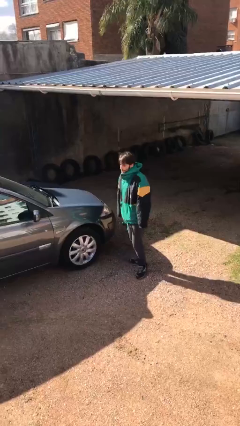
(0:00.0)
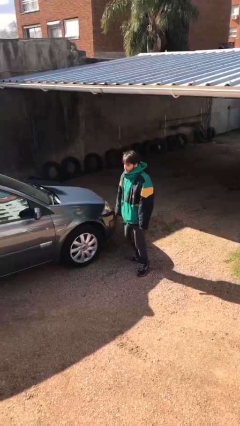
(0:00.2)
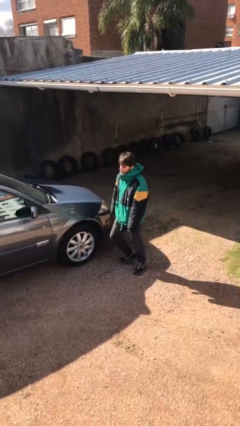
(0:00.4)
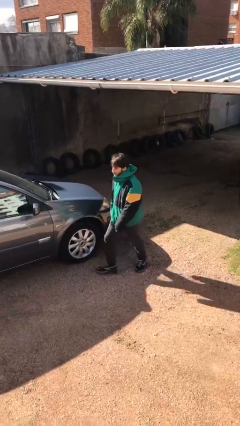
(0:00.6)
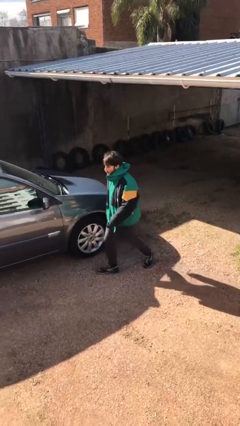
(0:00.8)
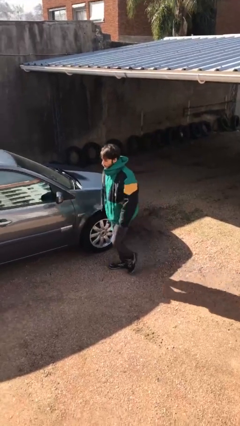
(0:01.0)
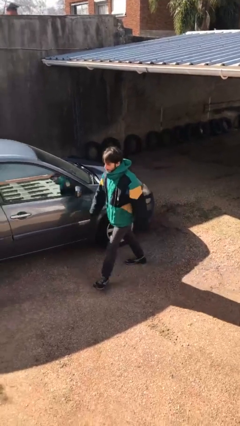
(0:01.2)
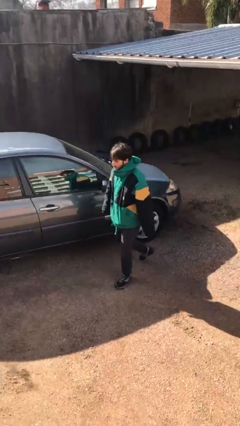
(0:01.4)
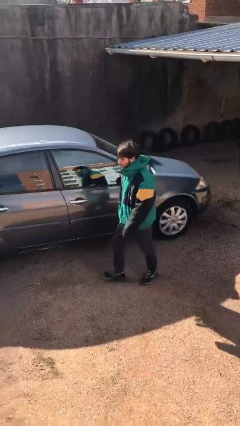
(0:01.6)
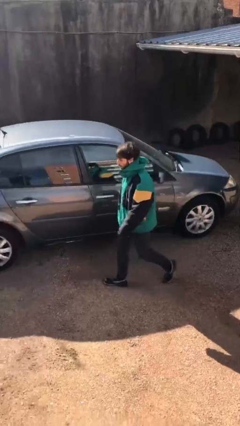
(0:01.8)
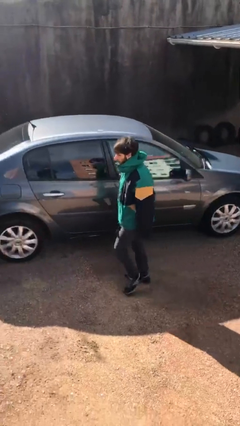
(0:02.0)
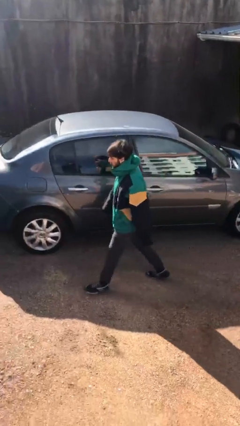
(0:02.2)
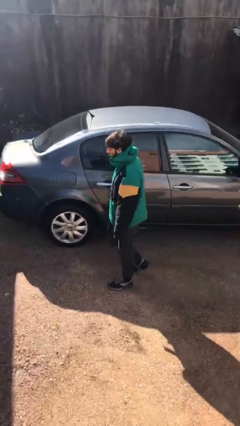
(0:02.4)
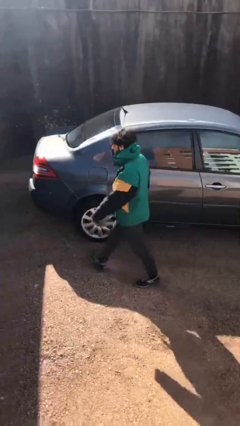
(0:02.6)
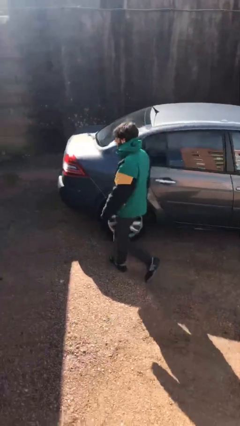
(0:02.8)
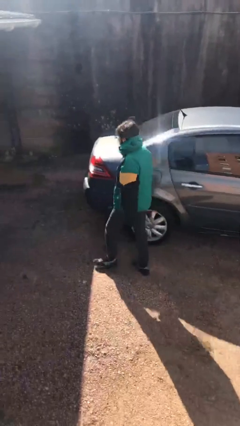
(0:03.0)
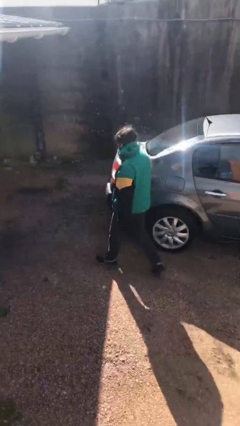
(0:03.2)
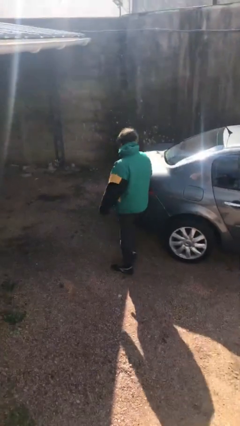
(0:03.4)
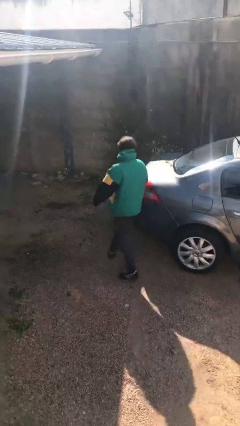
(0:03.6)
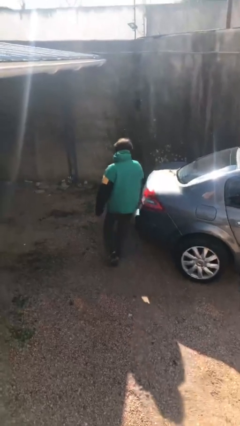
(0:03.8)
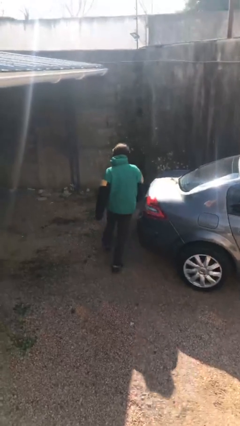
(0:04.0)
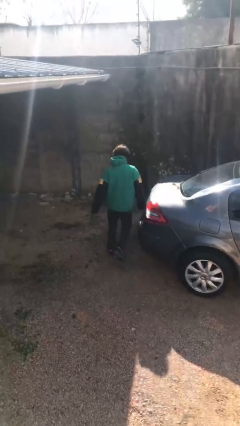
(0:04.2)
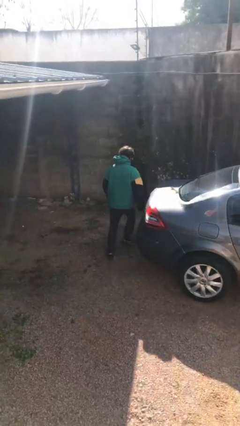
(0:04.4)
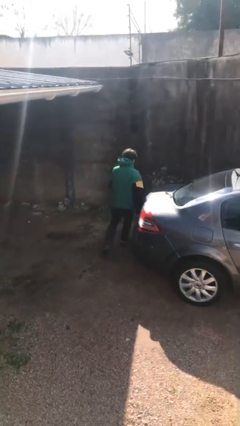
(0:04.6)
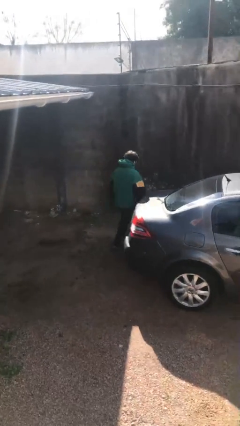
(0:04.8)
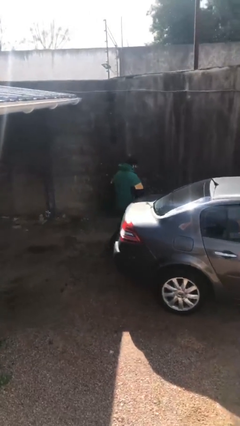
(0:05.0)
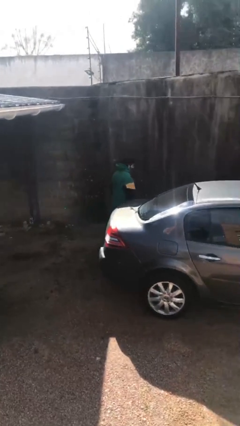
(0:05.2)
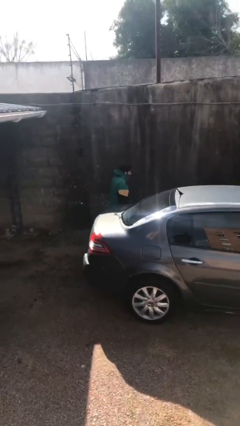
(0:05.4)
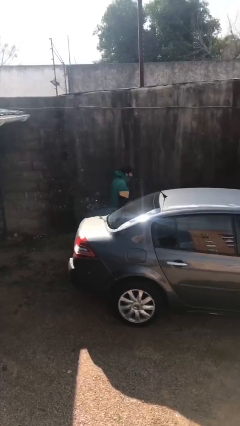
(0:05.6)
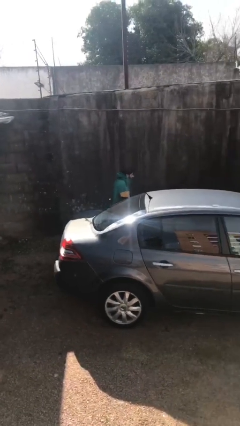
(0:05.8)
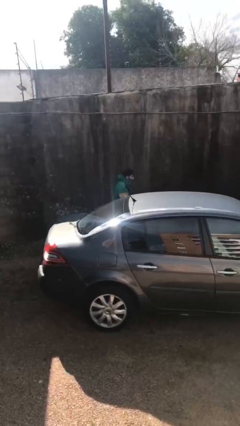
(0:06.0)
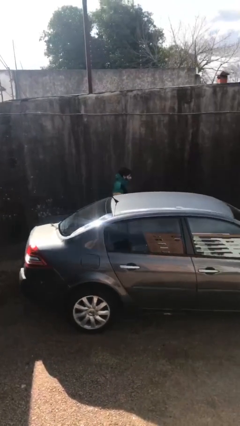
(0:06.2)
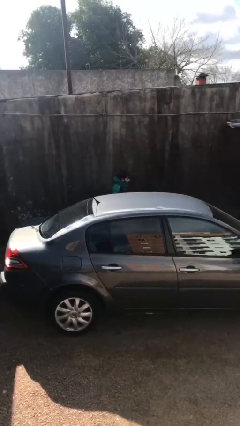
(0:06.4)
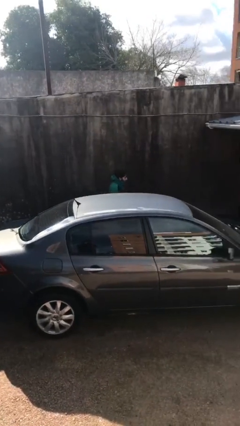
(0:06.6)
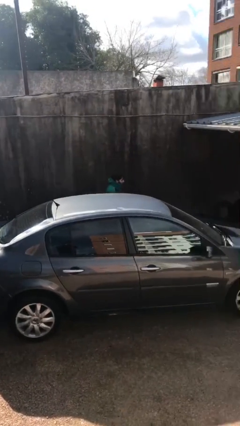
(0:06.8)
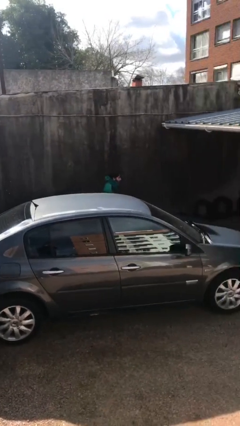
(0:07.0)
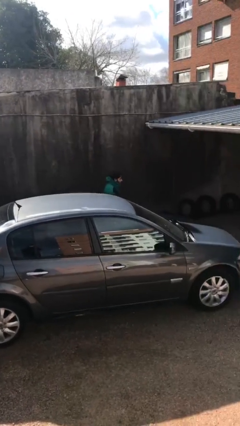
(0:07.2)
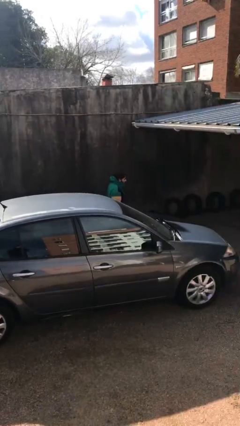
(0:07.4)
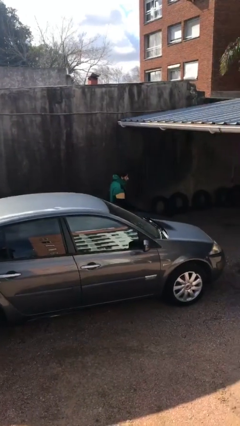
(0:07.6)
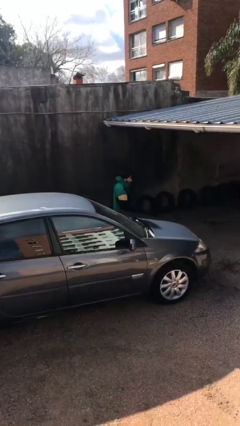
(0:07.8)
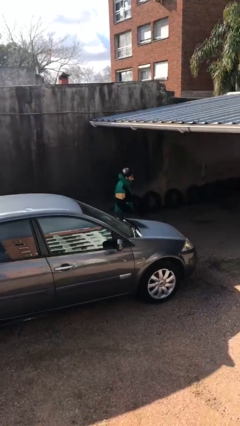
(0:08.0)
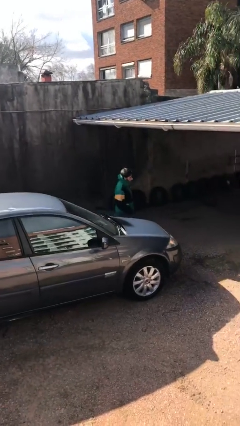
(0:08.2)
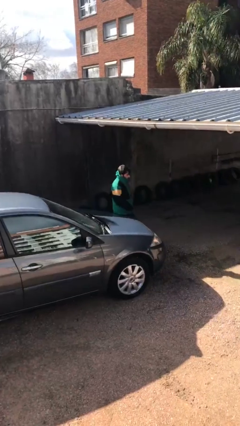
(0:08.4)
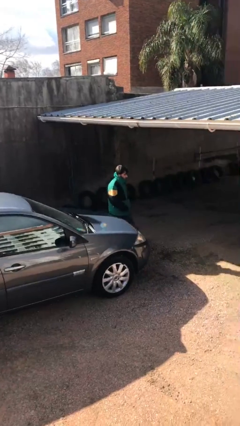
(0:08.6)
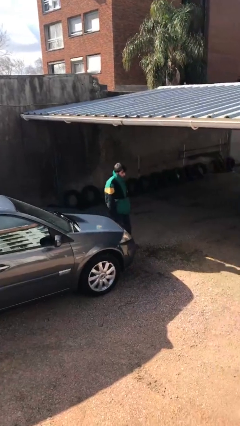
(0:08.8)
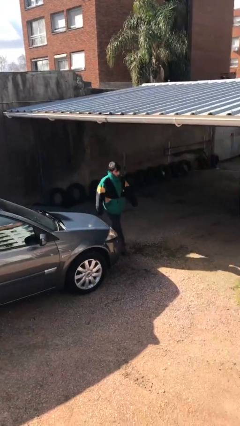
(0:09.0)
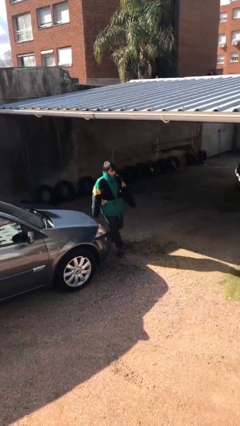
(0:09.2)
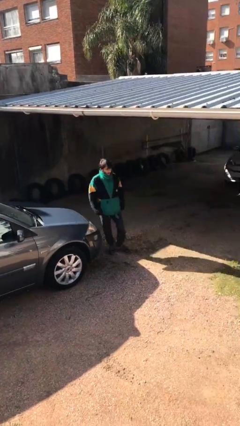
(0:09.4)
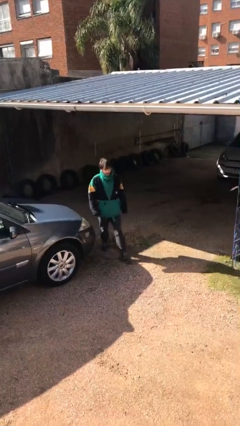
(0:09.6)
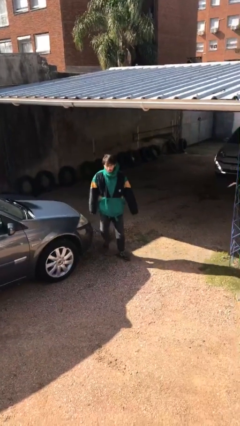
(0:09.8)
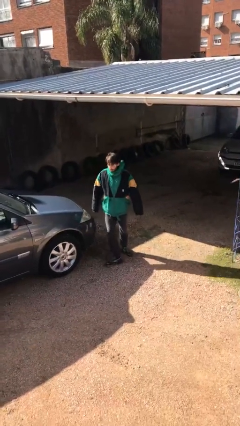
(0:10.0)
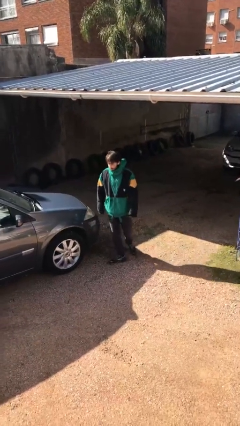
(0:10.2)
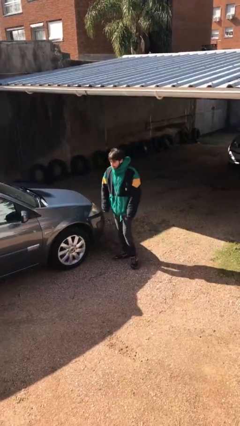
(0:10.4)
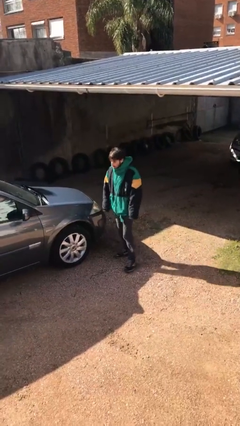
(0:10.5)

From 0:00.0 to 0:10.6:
person walks around car

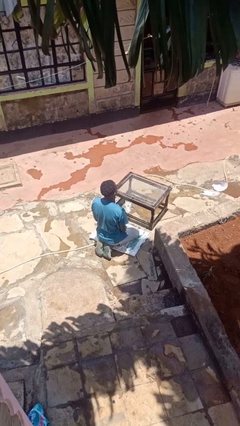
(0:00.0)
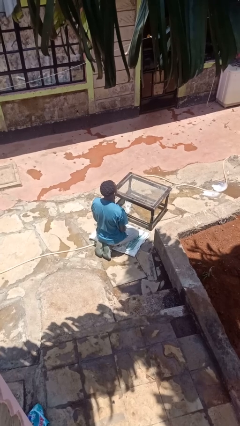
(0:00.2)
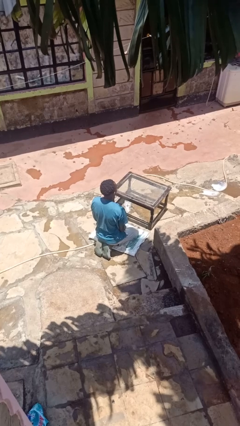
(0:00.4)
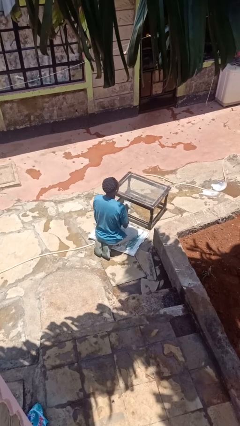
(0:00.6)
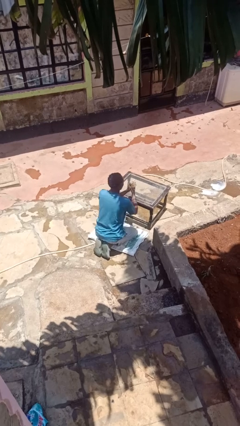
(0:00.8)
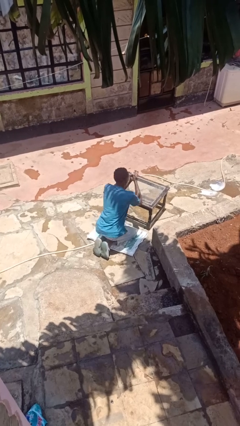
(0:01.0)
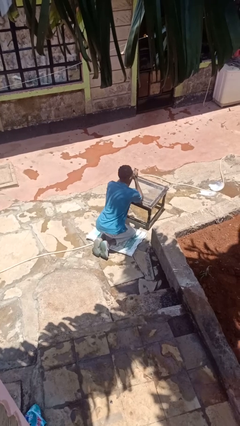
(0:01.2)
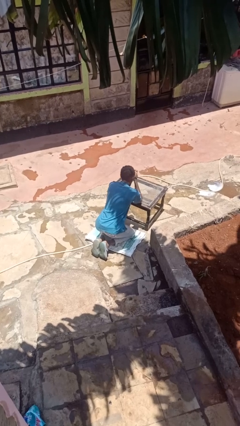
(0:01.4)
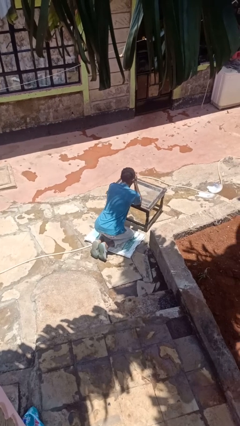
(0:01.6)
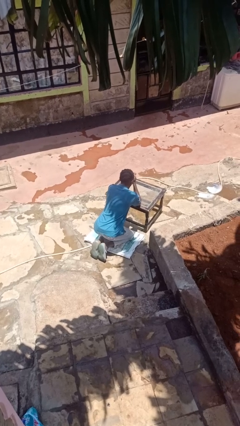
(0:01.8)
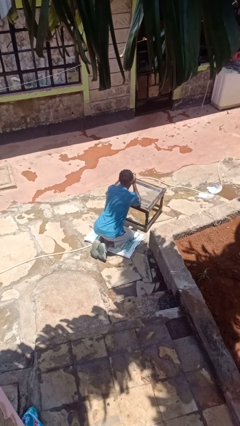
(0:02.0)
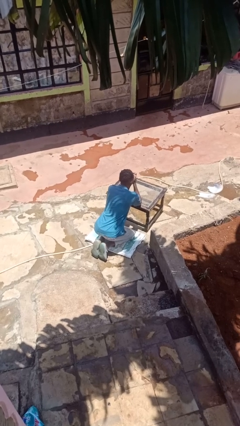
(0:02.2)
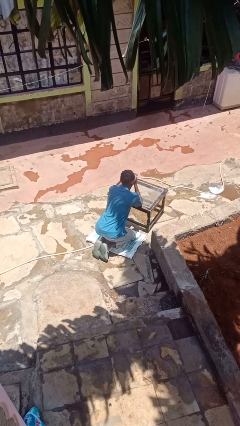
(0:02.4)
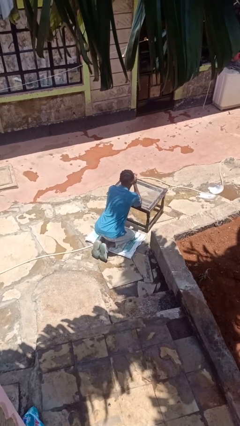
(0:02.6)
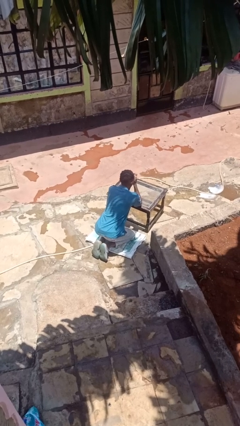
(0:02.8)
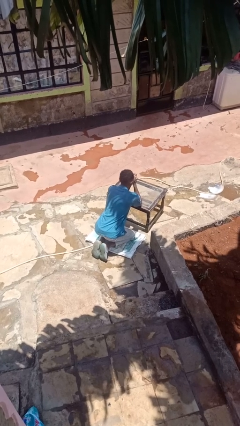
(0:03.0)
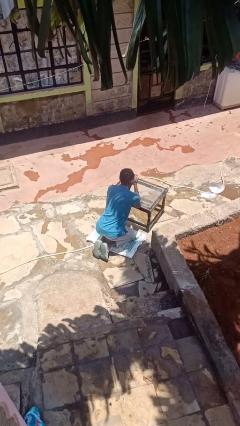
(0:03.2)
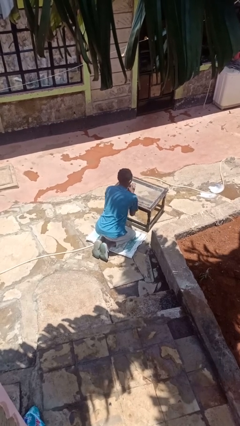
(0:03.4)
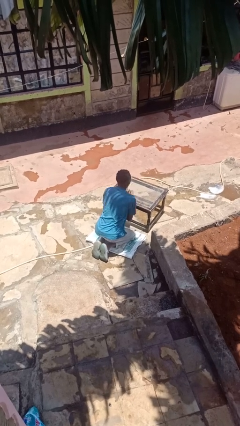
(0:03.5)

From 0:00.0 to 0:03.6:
person prays

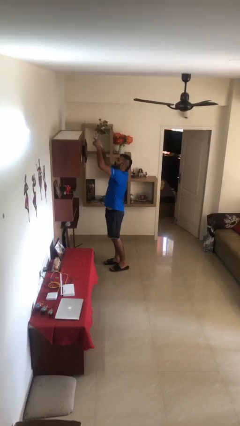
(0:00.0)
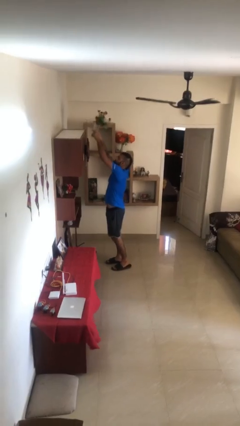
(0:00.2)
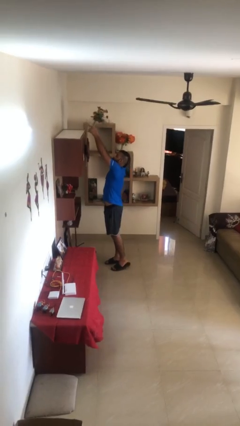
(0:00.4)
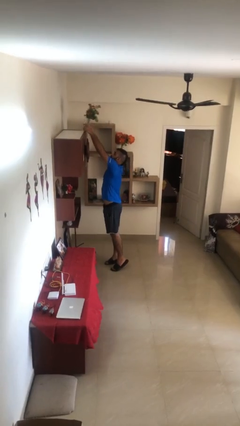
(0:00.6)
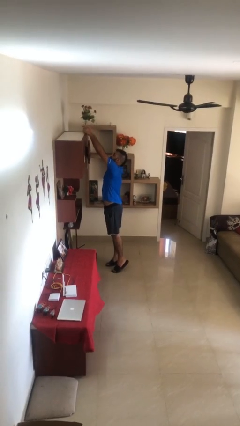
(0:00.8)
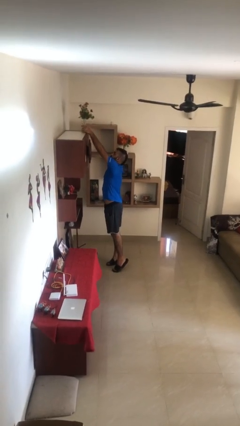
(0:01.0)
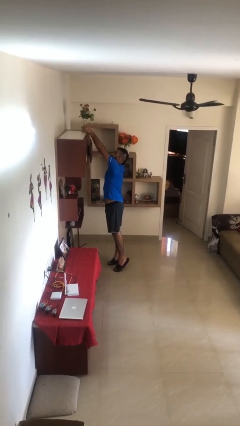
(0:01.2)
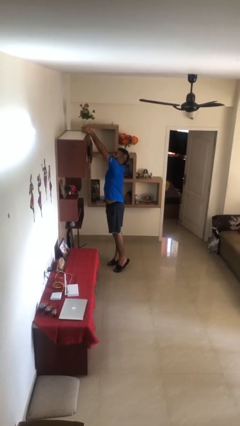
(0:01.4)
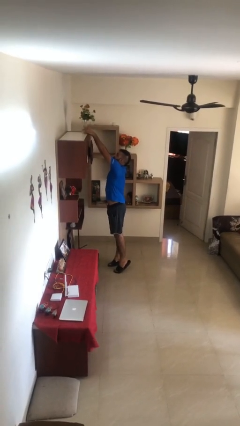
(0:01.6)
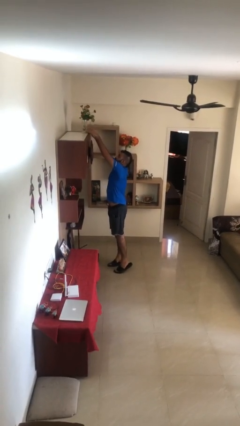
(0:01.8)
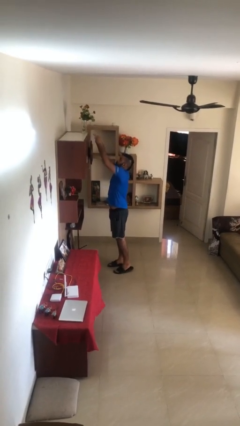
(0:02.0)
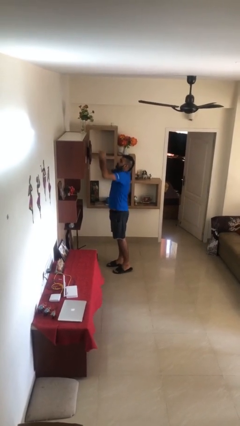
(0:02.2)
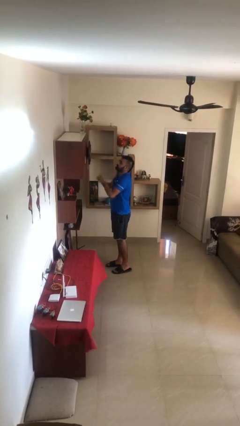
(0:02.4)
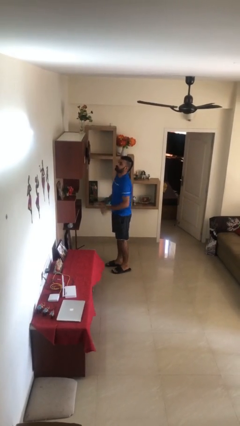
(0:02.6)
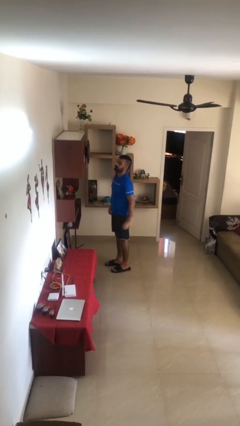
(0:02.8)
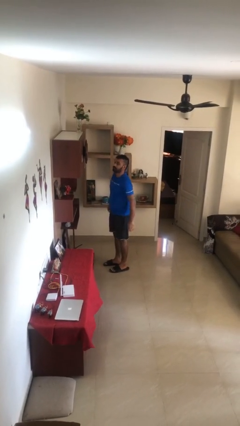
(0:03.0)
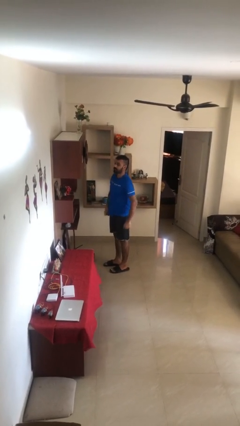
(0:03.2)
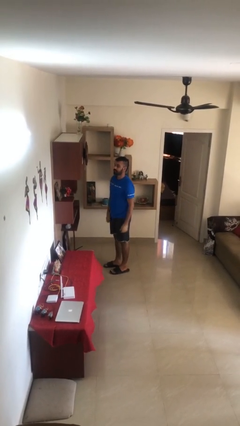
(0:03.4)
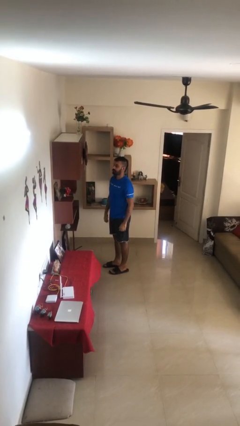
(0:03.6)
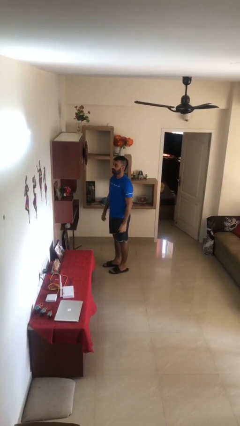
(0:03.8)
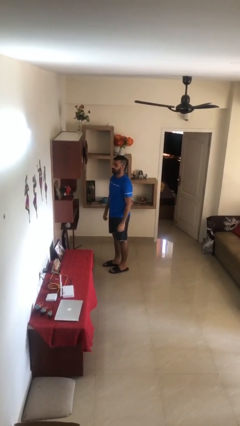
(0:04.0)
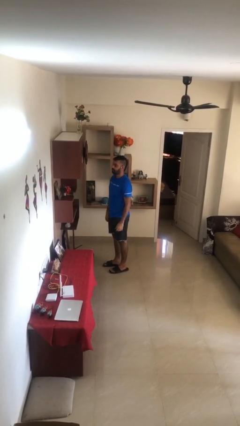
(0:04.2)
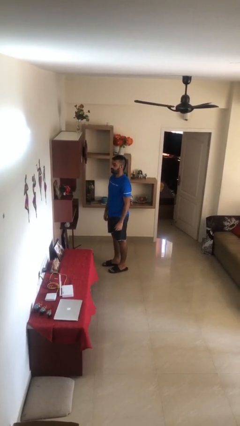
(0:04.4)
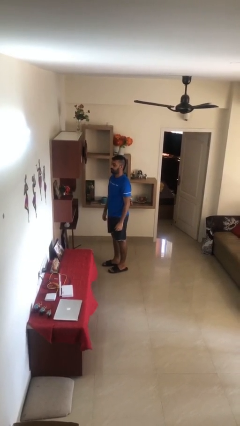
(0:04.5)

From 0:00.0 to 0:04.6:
person puts down object on shelf
